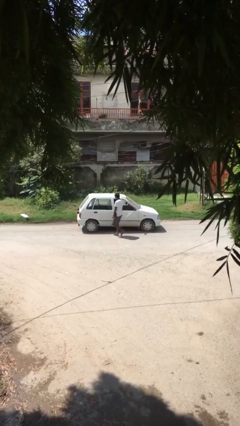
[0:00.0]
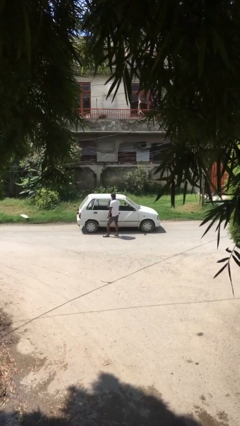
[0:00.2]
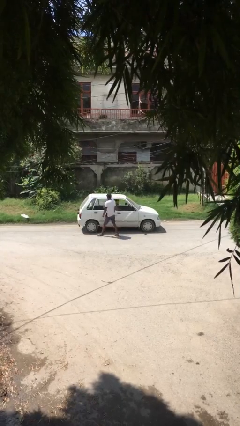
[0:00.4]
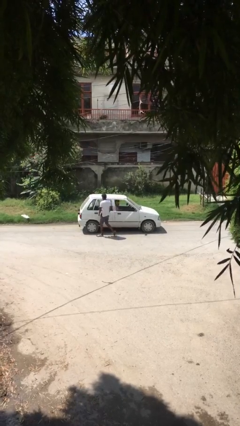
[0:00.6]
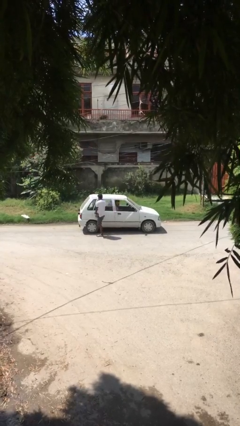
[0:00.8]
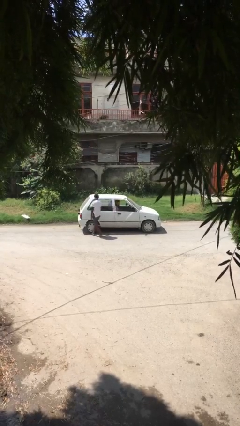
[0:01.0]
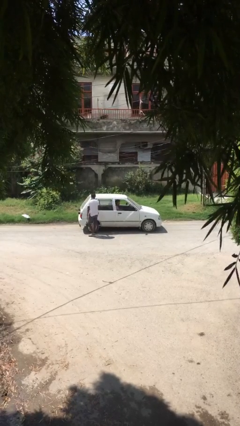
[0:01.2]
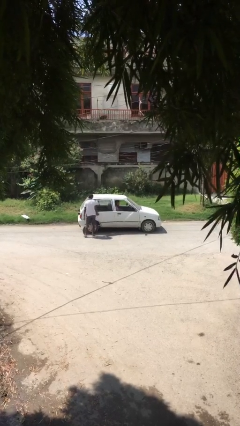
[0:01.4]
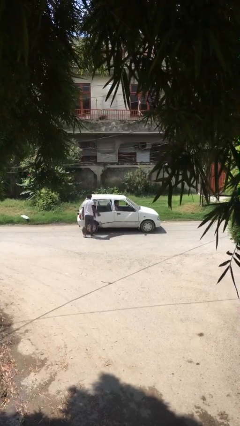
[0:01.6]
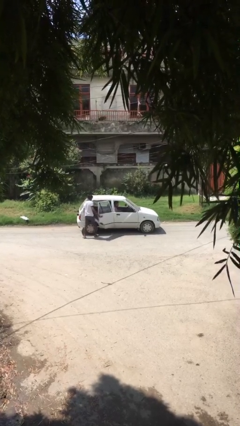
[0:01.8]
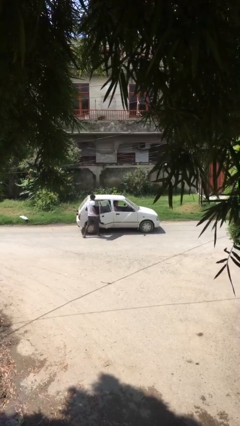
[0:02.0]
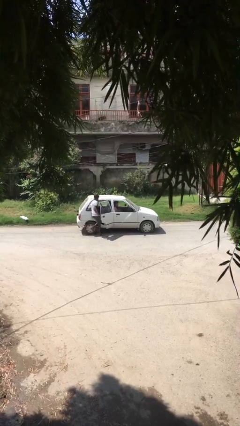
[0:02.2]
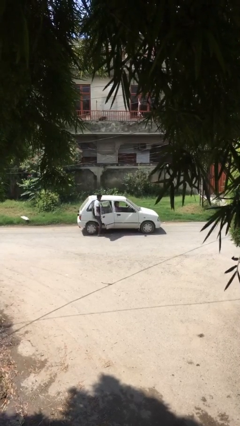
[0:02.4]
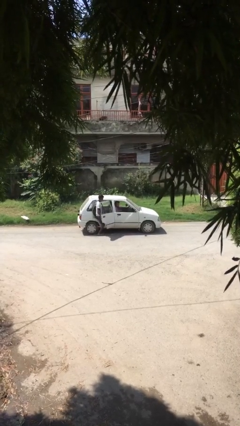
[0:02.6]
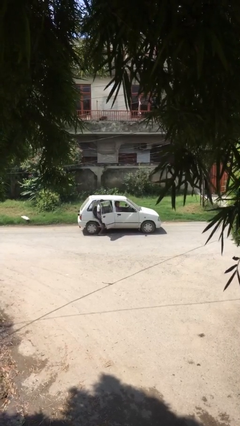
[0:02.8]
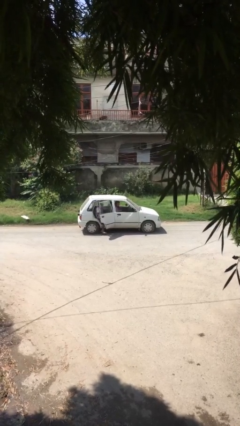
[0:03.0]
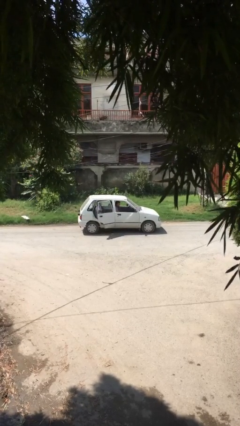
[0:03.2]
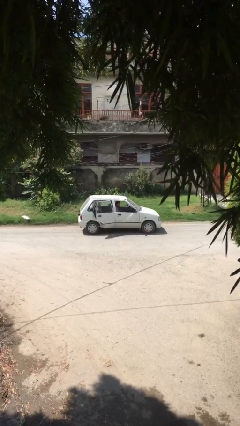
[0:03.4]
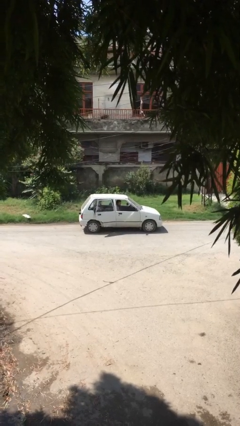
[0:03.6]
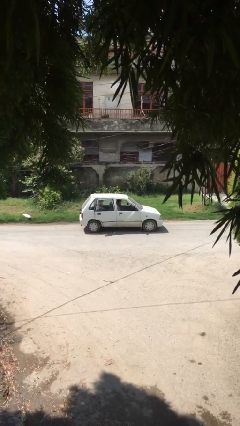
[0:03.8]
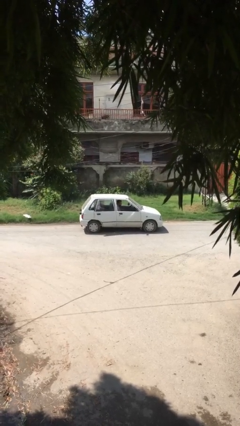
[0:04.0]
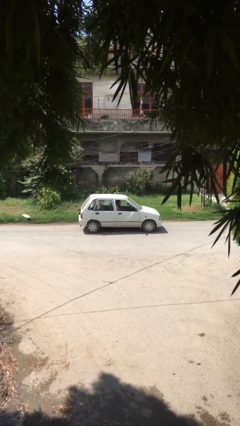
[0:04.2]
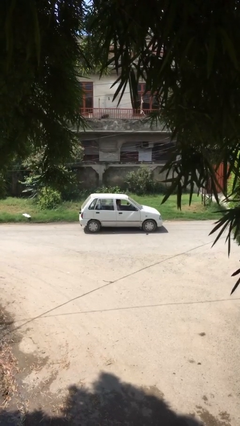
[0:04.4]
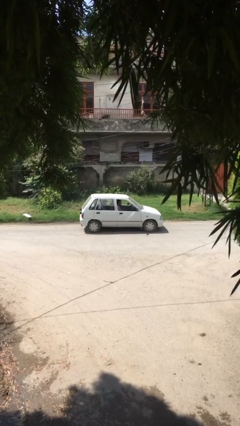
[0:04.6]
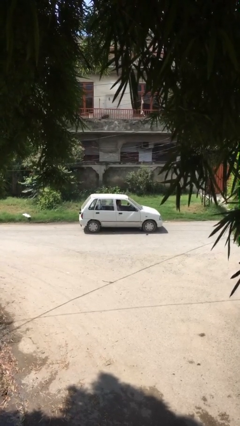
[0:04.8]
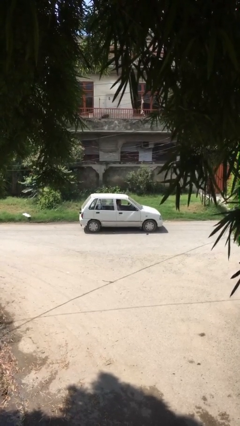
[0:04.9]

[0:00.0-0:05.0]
car picks up person

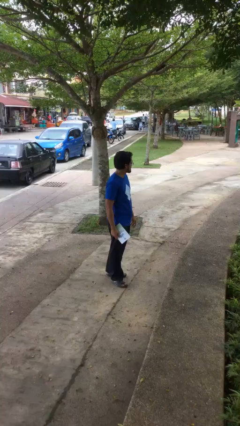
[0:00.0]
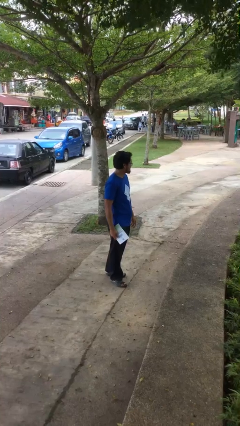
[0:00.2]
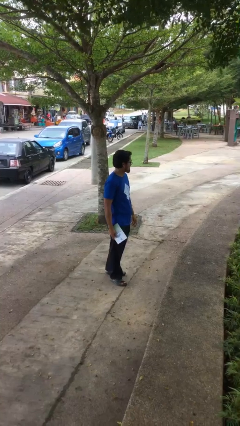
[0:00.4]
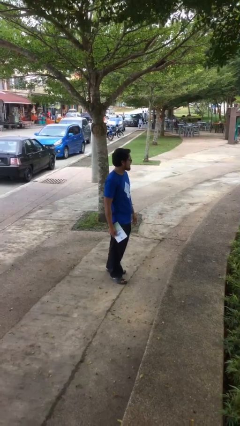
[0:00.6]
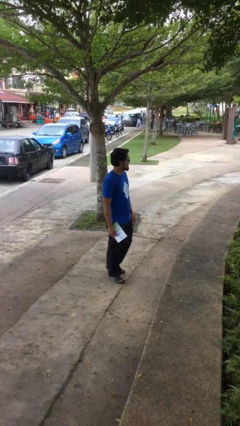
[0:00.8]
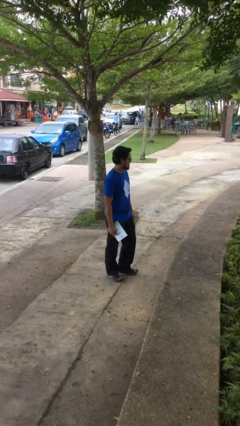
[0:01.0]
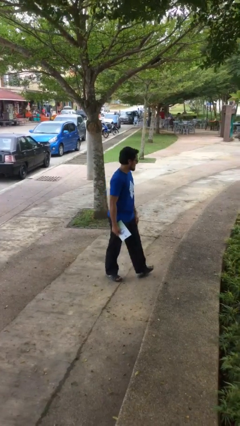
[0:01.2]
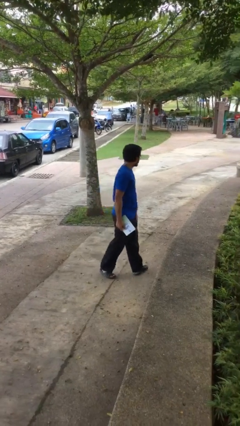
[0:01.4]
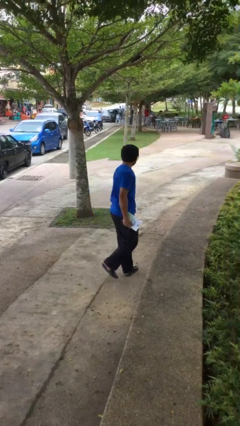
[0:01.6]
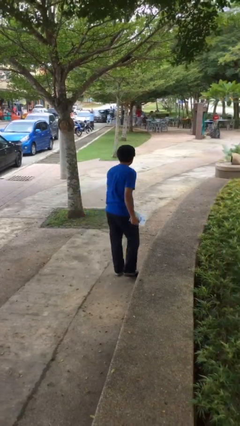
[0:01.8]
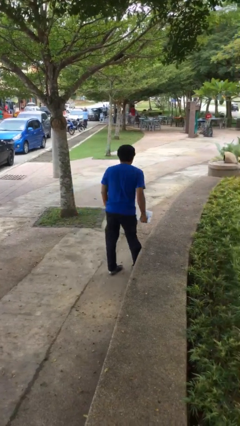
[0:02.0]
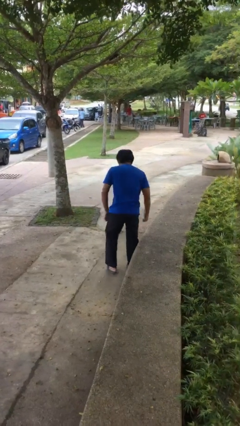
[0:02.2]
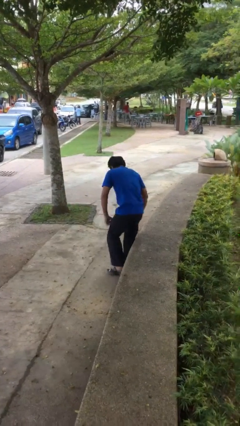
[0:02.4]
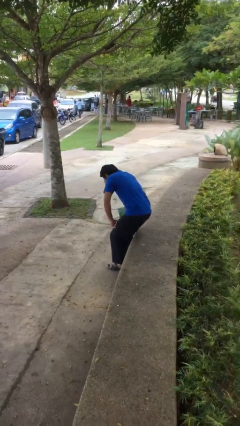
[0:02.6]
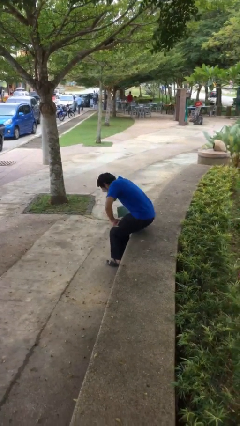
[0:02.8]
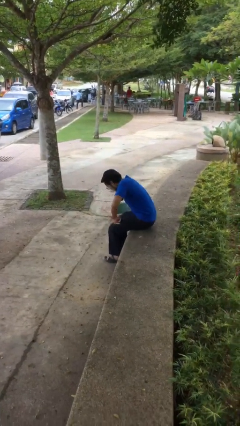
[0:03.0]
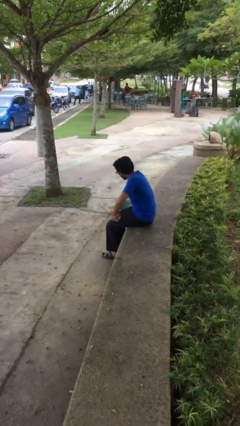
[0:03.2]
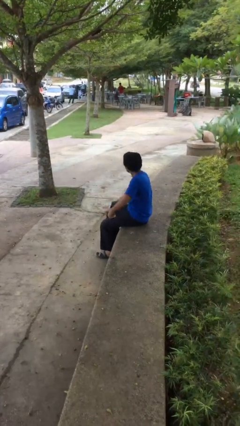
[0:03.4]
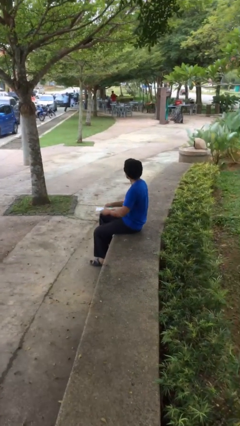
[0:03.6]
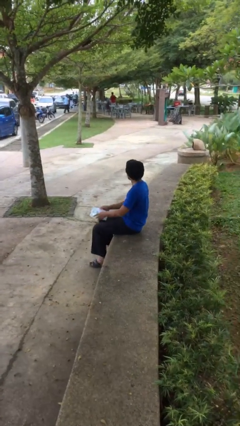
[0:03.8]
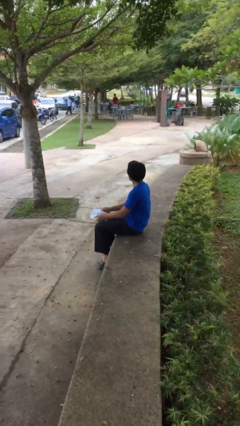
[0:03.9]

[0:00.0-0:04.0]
person sits down

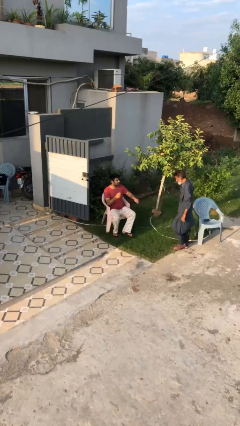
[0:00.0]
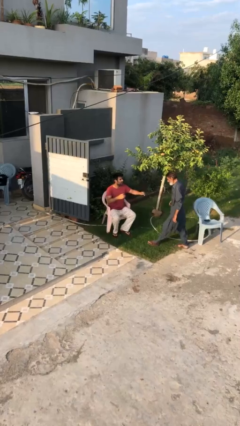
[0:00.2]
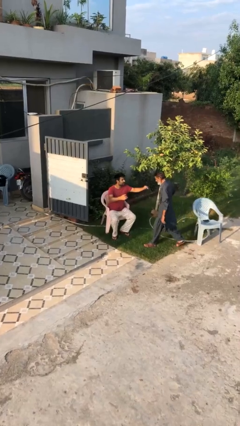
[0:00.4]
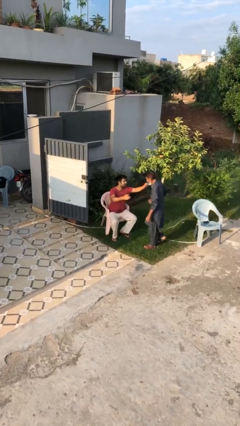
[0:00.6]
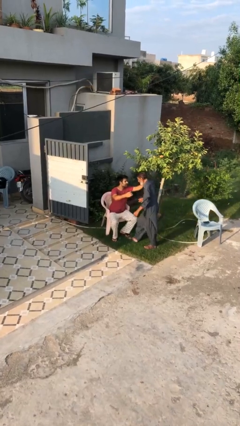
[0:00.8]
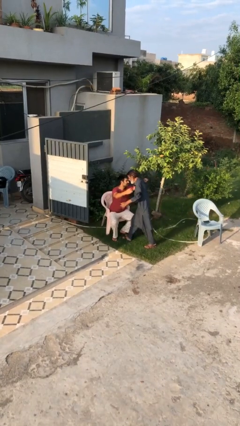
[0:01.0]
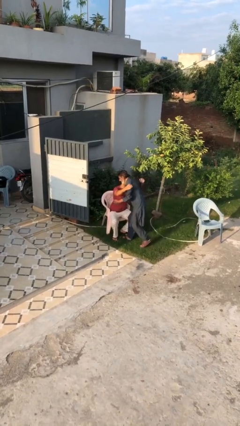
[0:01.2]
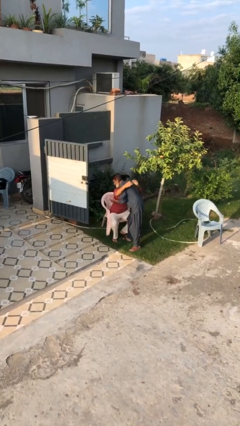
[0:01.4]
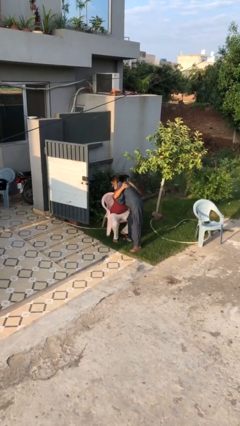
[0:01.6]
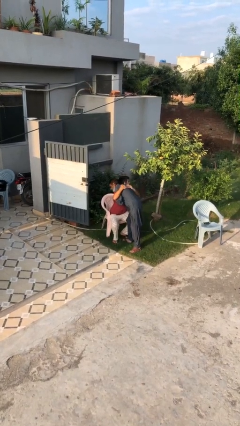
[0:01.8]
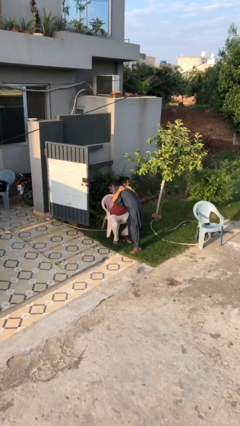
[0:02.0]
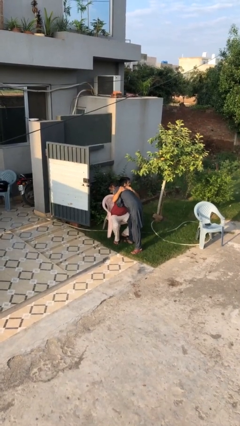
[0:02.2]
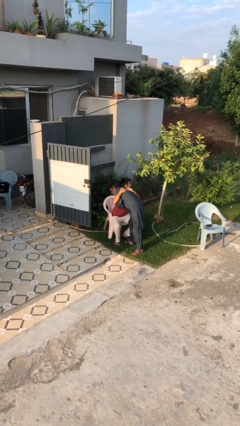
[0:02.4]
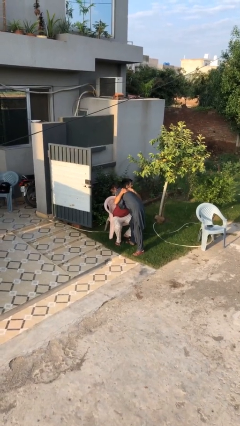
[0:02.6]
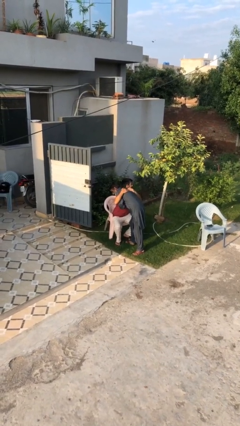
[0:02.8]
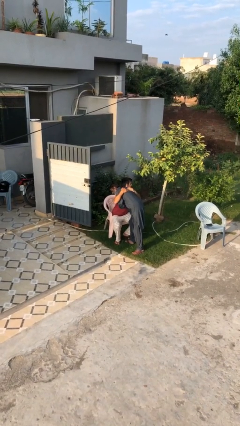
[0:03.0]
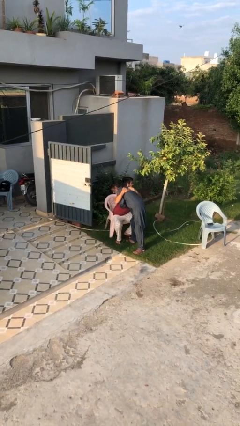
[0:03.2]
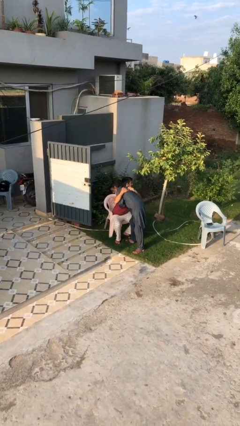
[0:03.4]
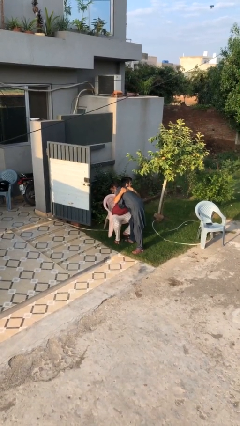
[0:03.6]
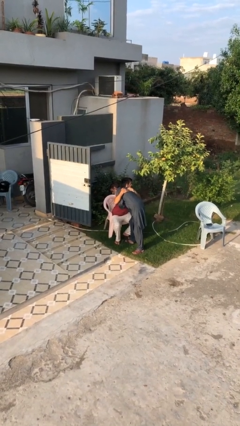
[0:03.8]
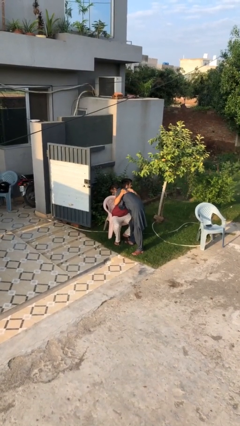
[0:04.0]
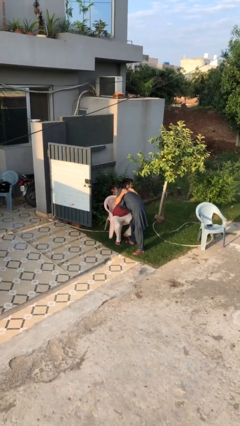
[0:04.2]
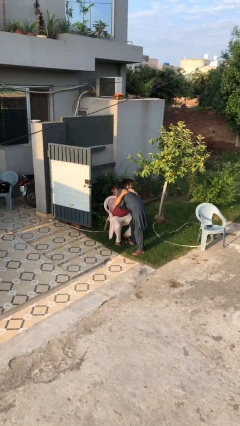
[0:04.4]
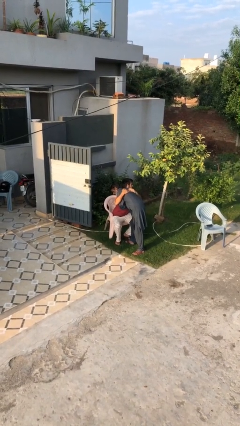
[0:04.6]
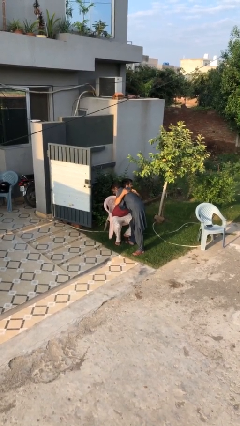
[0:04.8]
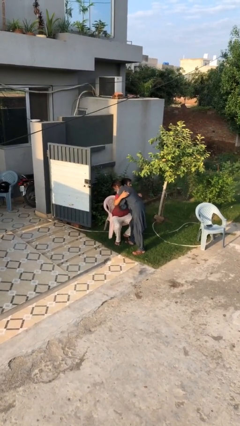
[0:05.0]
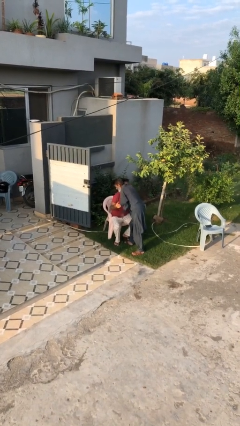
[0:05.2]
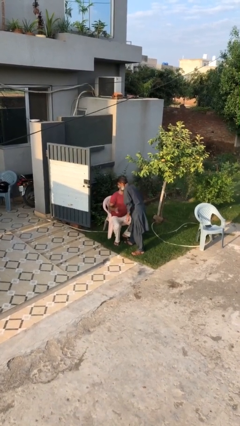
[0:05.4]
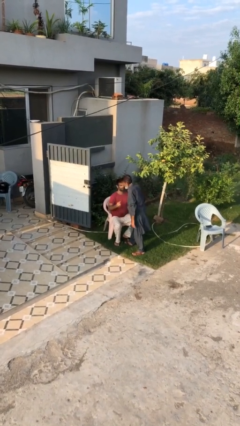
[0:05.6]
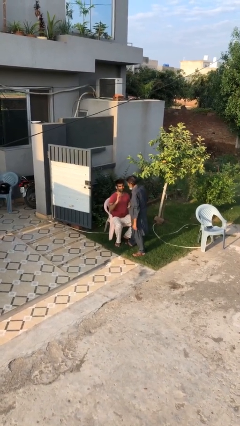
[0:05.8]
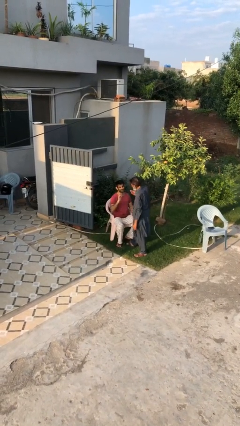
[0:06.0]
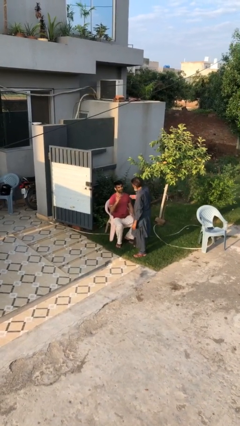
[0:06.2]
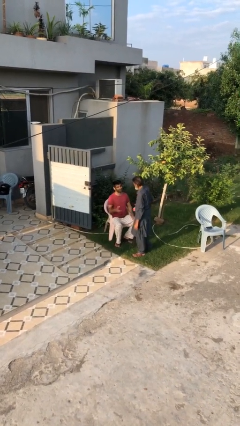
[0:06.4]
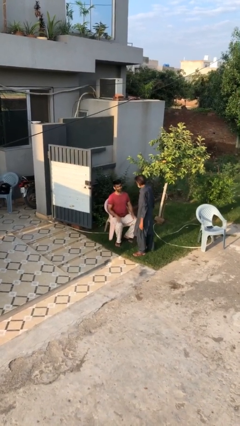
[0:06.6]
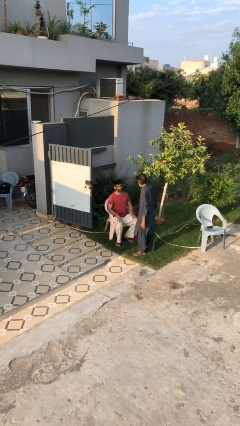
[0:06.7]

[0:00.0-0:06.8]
person embraces person

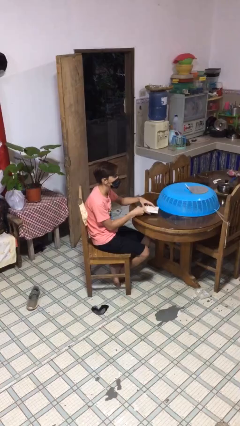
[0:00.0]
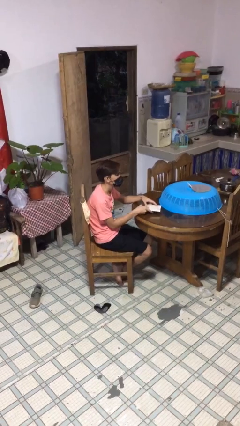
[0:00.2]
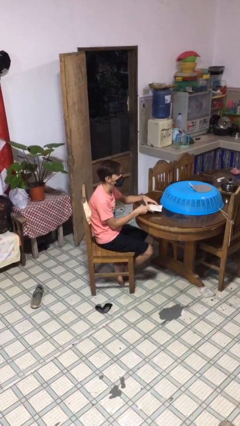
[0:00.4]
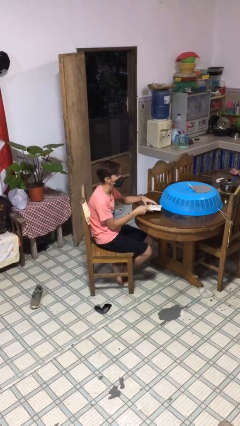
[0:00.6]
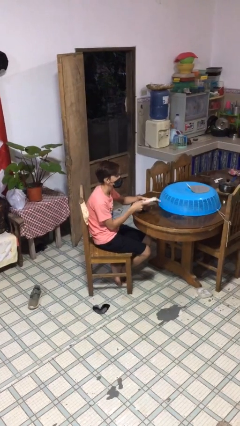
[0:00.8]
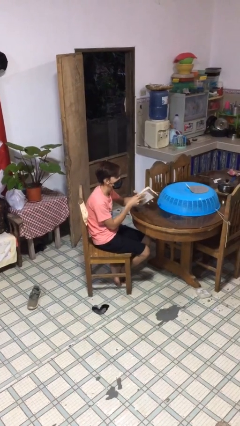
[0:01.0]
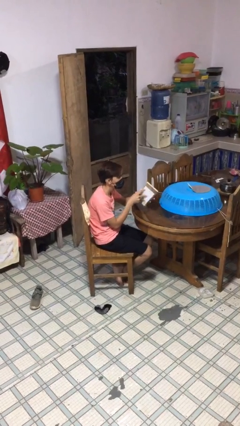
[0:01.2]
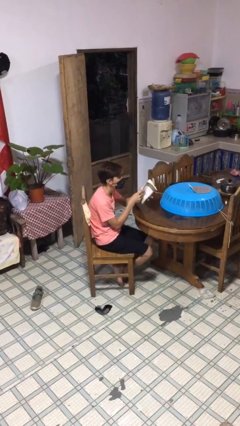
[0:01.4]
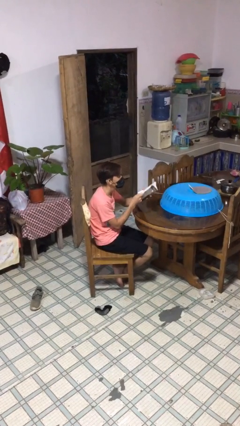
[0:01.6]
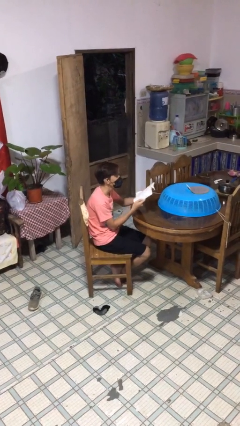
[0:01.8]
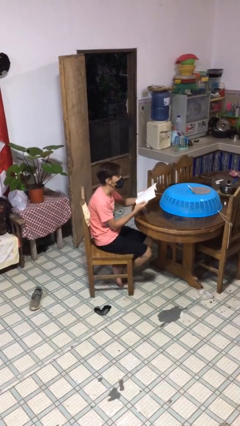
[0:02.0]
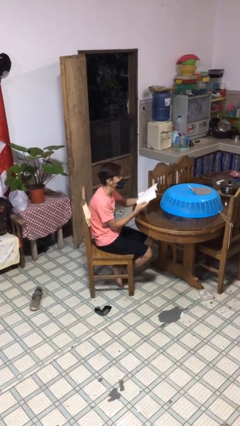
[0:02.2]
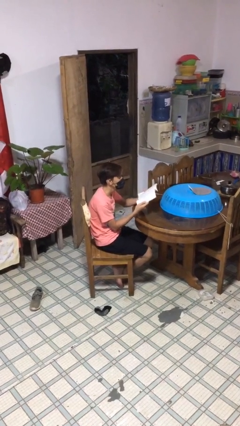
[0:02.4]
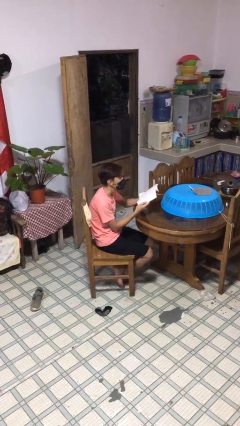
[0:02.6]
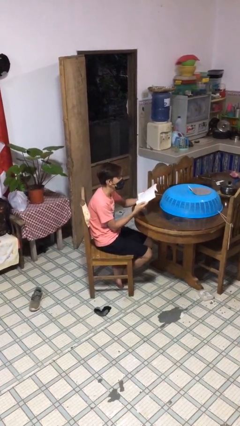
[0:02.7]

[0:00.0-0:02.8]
person reads document
